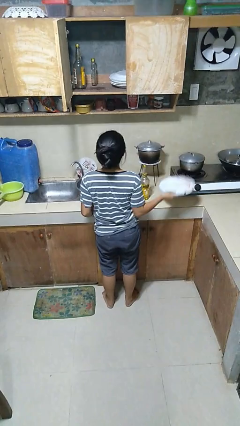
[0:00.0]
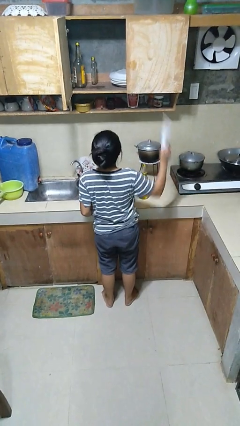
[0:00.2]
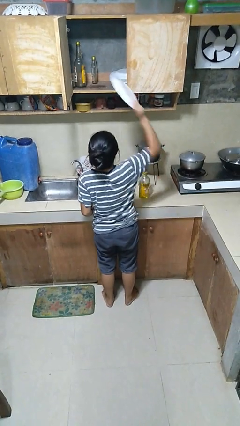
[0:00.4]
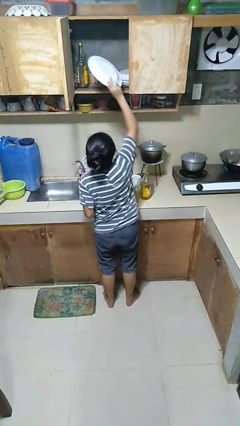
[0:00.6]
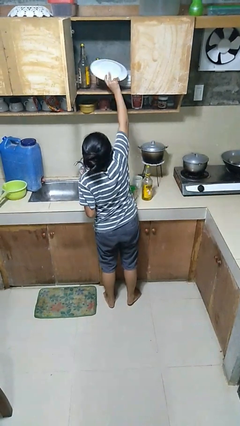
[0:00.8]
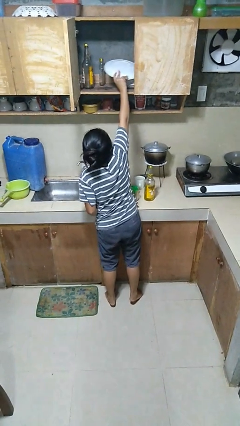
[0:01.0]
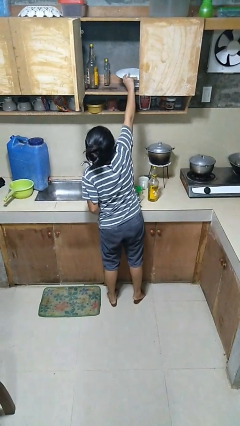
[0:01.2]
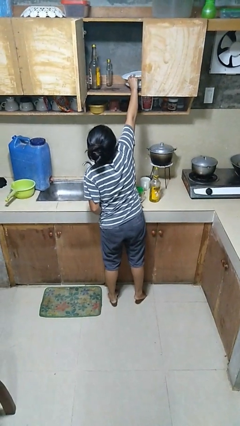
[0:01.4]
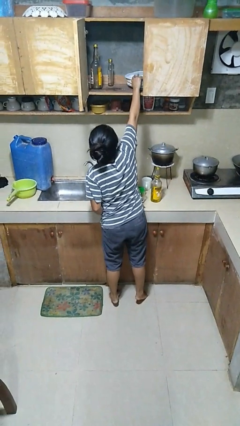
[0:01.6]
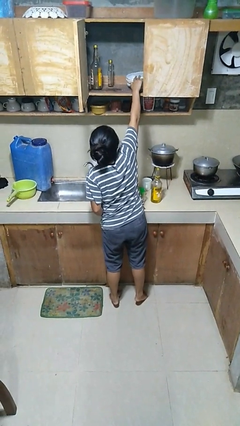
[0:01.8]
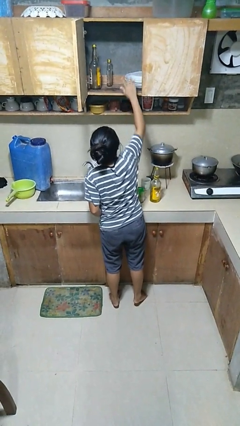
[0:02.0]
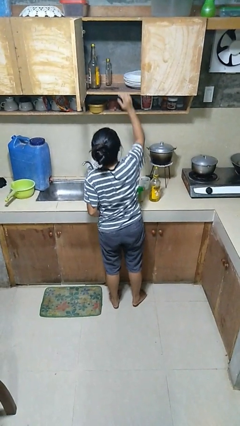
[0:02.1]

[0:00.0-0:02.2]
person puts object in cabinet

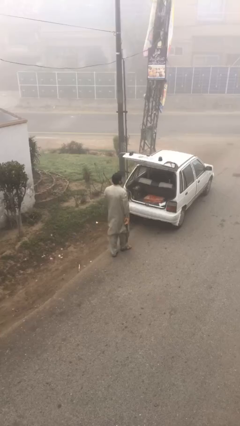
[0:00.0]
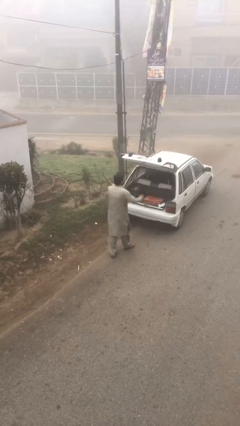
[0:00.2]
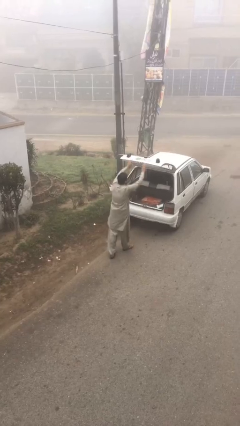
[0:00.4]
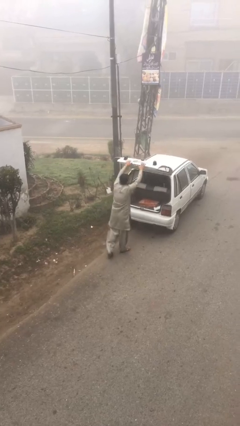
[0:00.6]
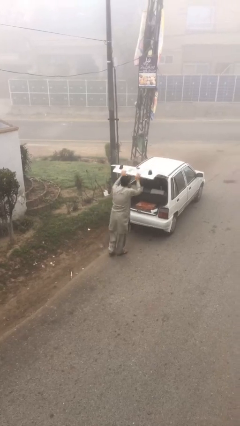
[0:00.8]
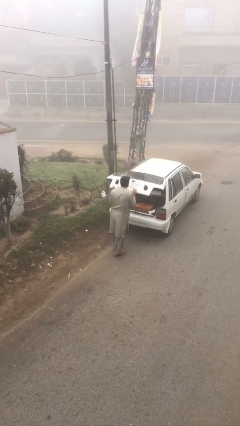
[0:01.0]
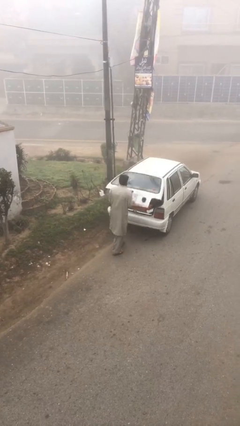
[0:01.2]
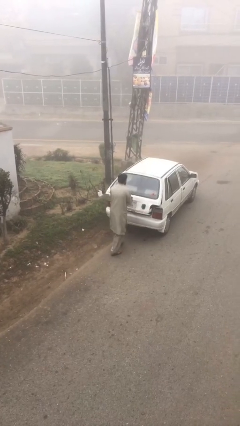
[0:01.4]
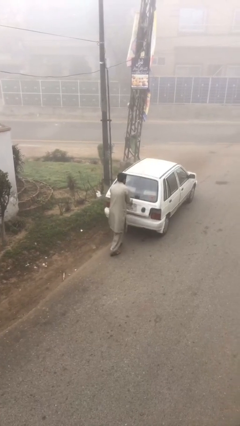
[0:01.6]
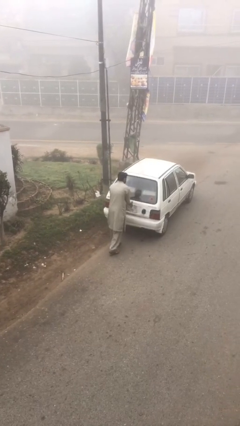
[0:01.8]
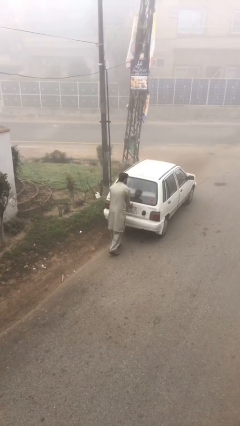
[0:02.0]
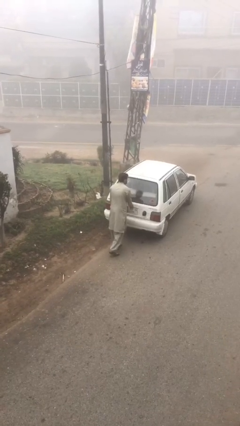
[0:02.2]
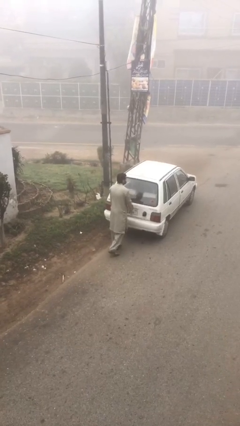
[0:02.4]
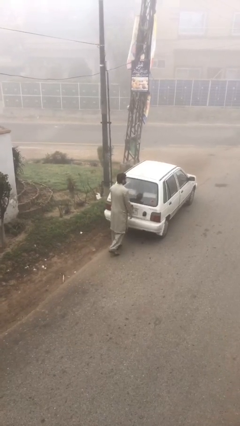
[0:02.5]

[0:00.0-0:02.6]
person closes car trunk

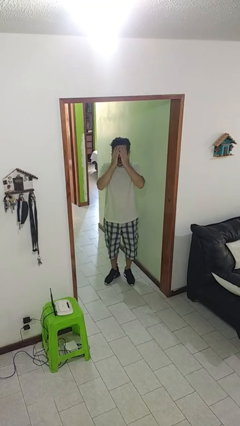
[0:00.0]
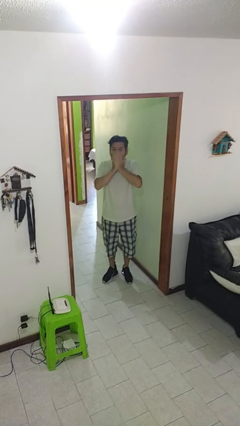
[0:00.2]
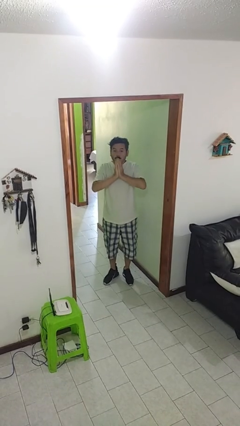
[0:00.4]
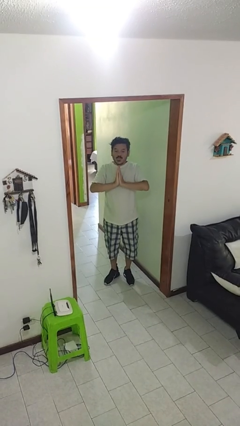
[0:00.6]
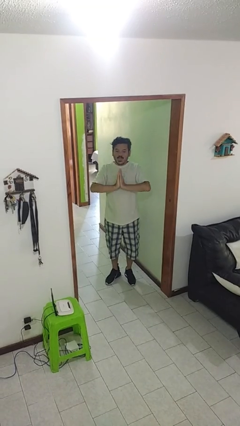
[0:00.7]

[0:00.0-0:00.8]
person covers face with hands

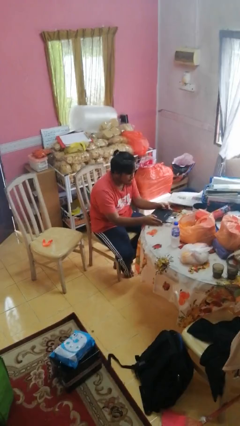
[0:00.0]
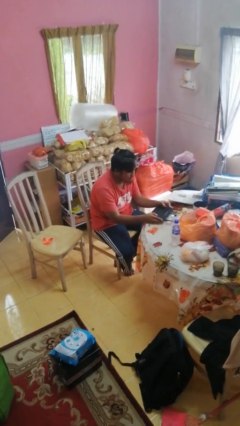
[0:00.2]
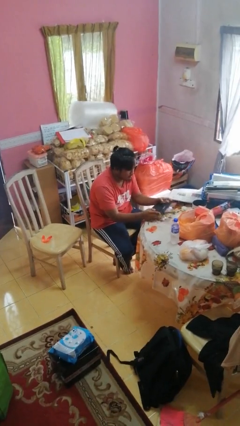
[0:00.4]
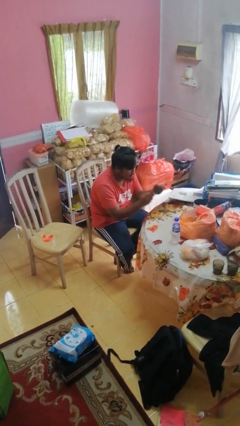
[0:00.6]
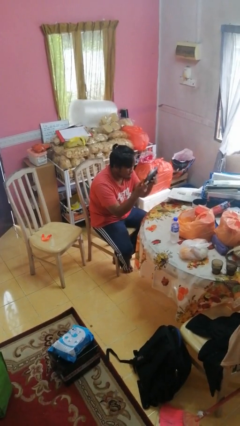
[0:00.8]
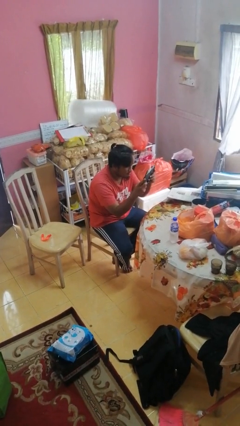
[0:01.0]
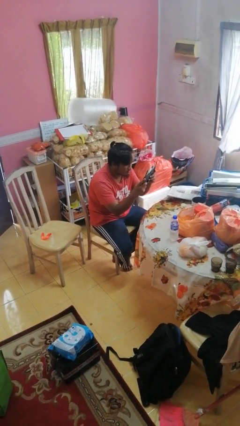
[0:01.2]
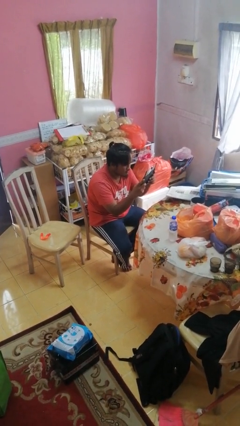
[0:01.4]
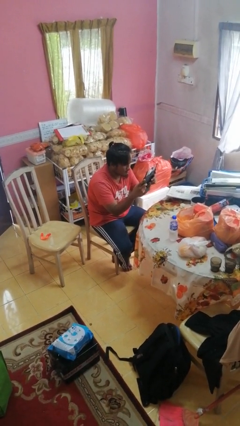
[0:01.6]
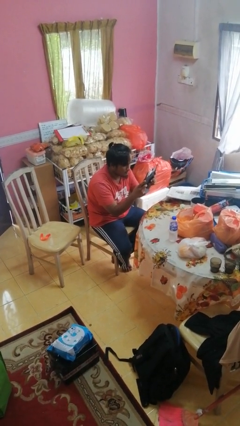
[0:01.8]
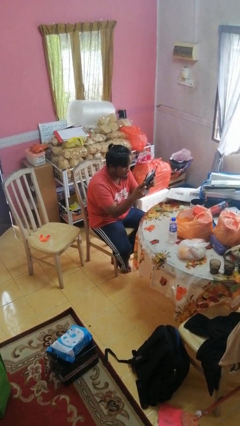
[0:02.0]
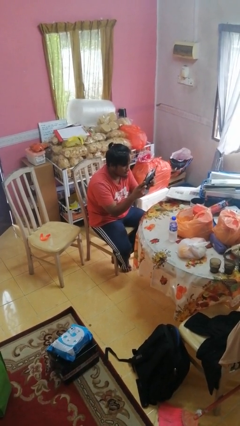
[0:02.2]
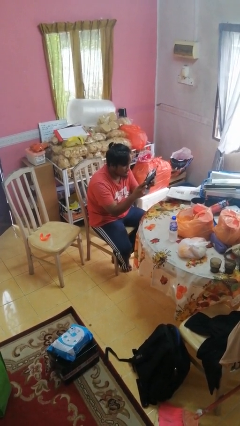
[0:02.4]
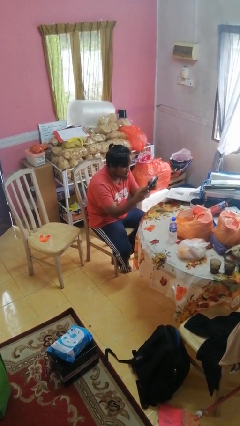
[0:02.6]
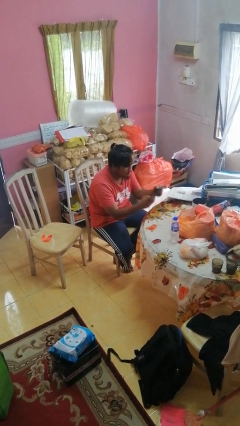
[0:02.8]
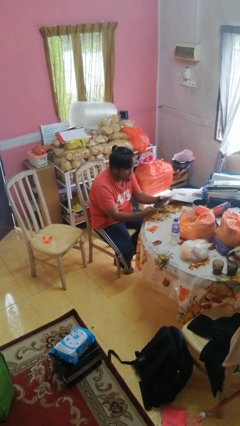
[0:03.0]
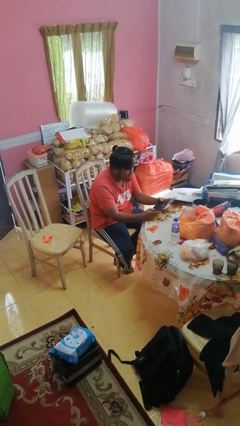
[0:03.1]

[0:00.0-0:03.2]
person interacts with handheld game

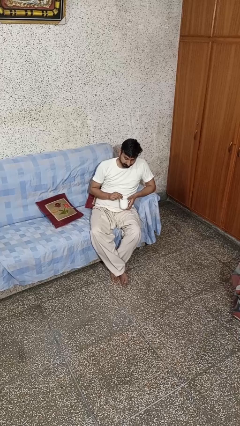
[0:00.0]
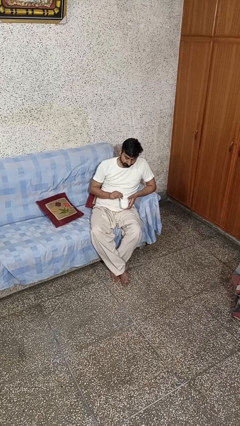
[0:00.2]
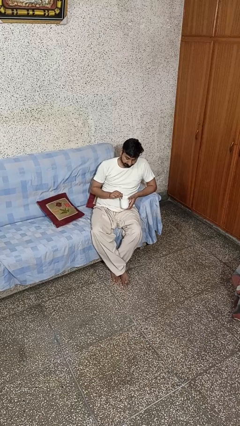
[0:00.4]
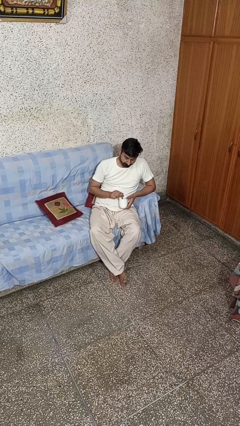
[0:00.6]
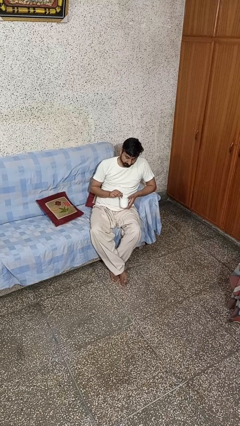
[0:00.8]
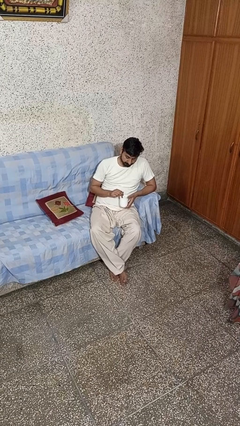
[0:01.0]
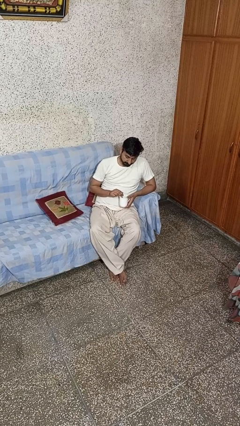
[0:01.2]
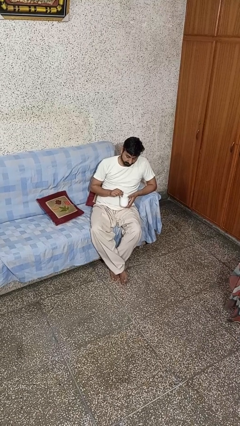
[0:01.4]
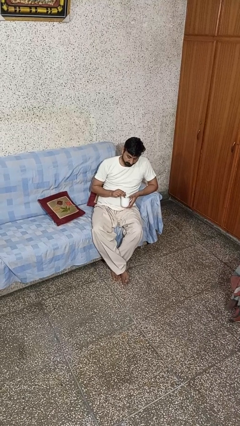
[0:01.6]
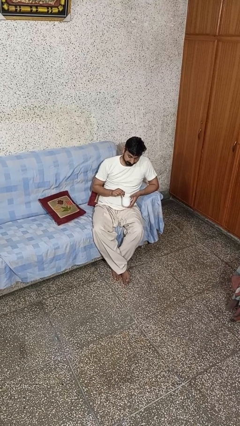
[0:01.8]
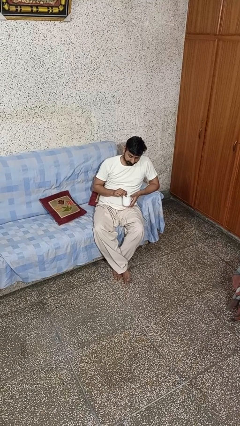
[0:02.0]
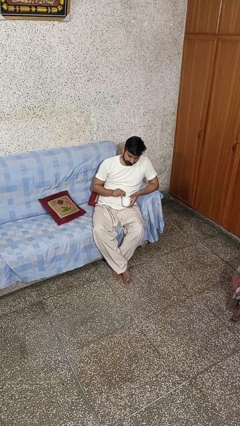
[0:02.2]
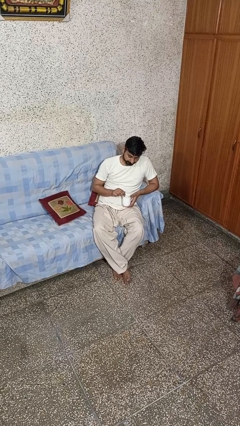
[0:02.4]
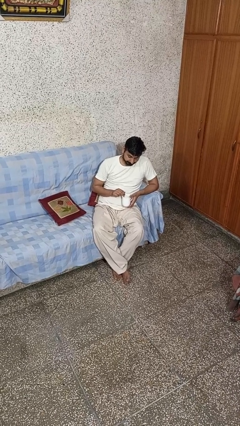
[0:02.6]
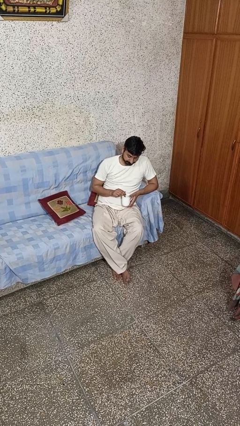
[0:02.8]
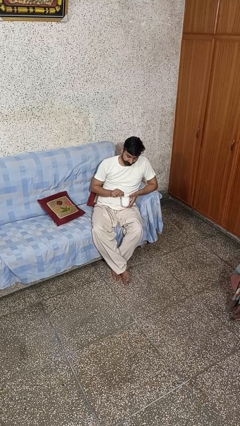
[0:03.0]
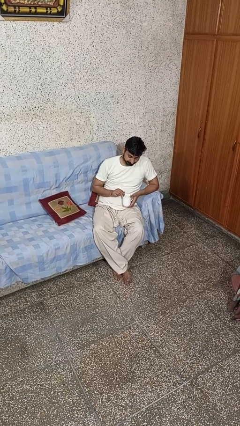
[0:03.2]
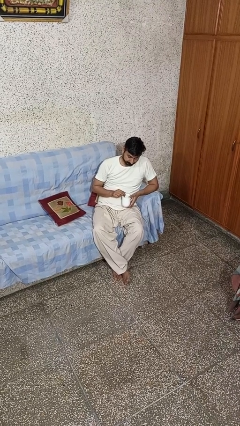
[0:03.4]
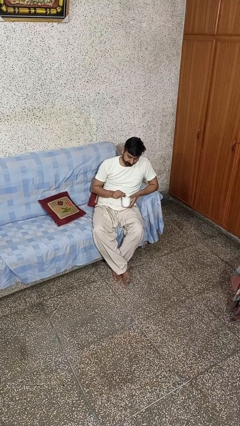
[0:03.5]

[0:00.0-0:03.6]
person stirs mug

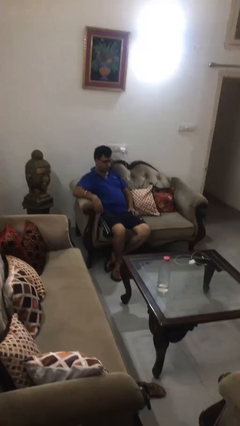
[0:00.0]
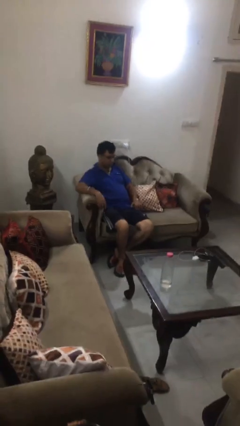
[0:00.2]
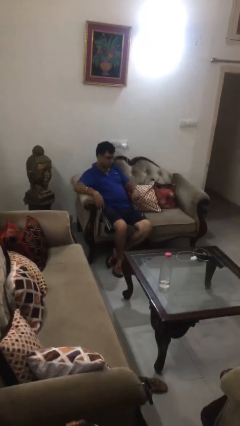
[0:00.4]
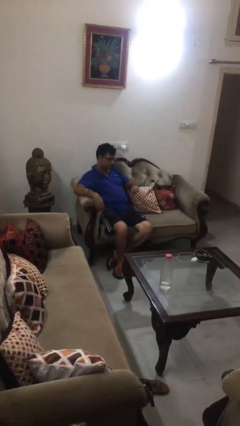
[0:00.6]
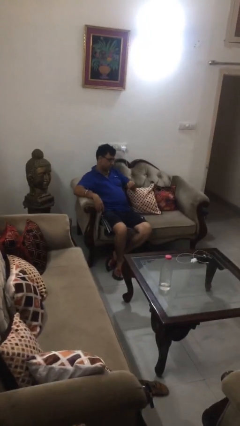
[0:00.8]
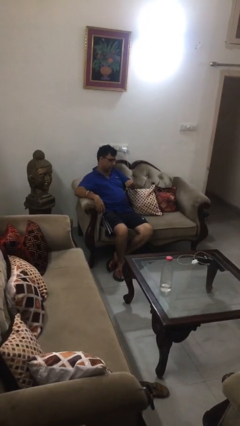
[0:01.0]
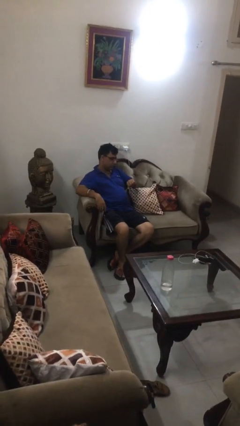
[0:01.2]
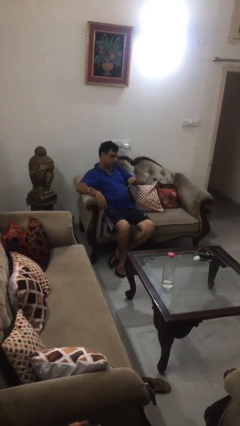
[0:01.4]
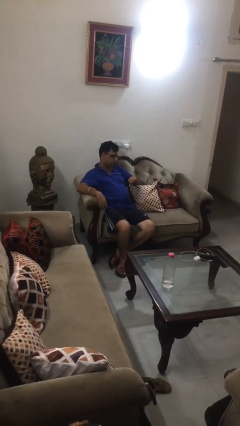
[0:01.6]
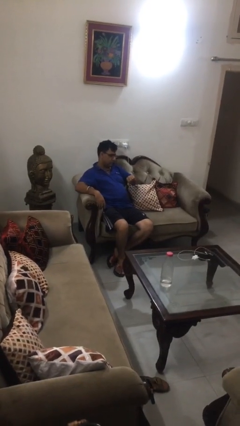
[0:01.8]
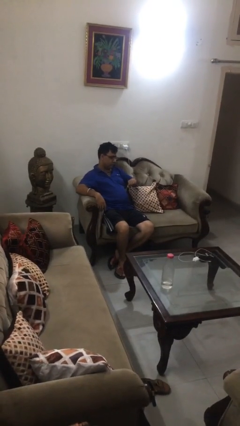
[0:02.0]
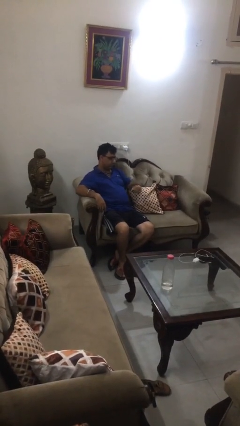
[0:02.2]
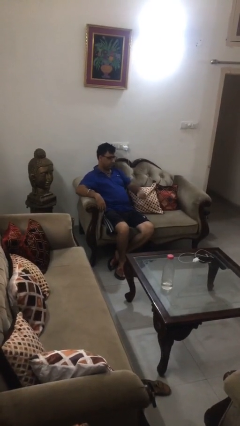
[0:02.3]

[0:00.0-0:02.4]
person looks at wristwatch

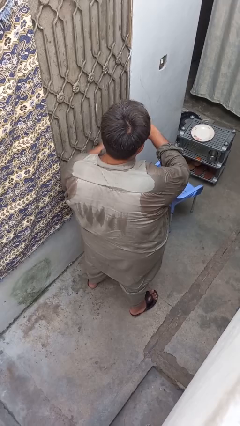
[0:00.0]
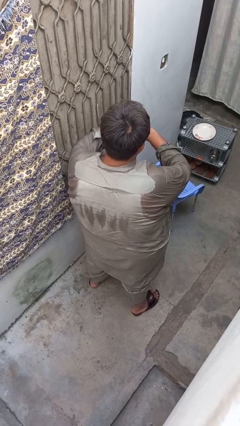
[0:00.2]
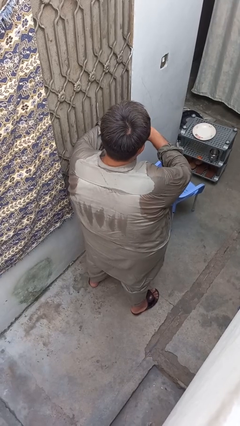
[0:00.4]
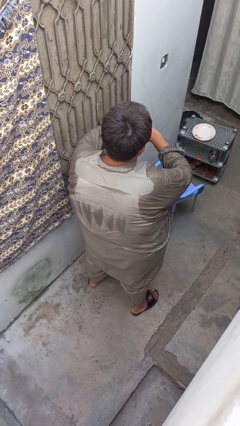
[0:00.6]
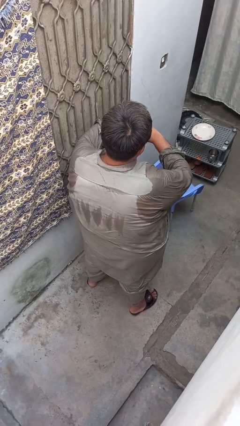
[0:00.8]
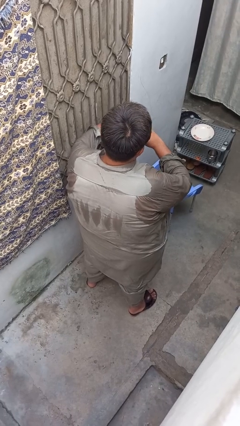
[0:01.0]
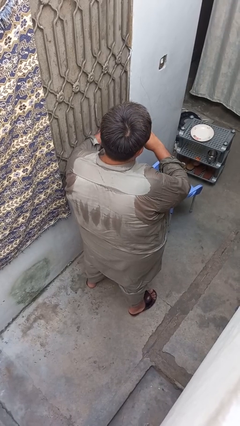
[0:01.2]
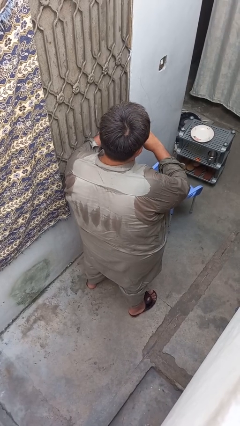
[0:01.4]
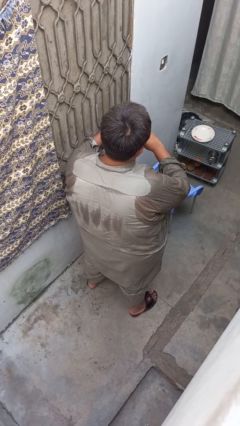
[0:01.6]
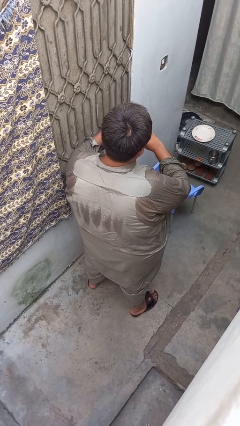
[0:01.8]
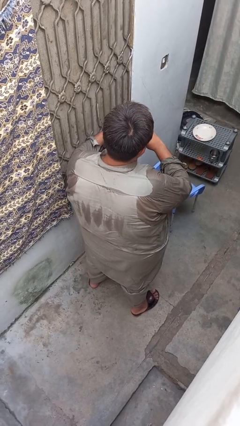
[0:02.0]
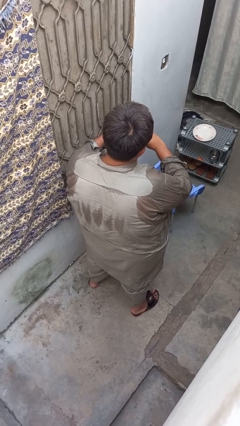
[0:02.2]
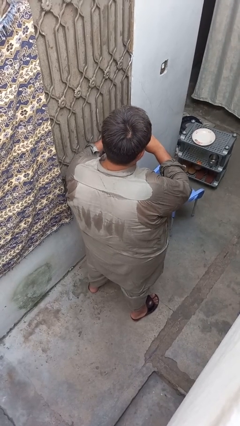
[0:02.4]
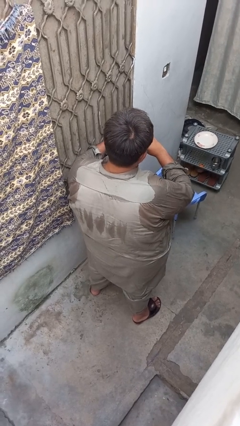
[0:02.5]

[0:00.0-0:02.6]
person takes off ring
